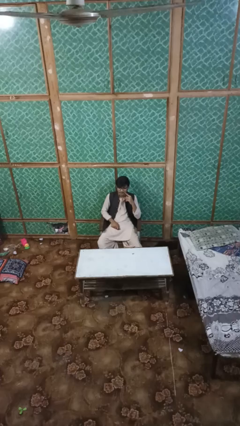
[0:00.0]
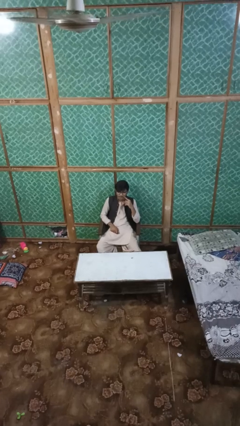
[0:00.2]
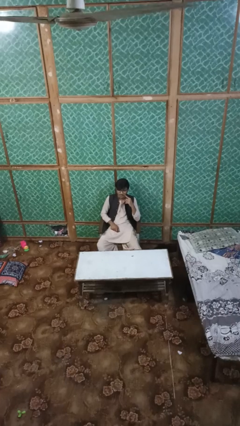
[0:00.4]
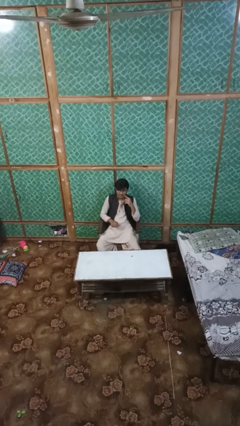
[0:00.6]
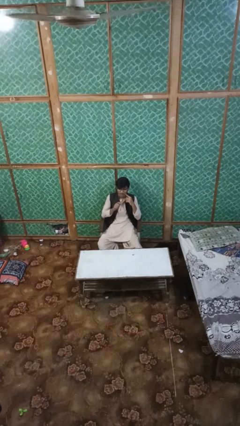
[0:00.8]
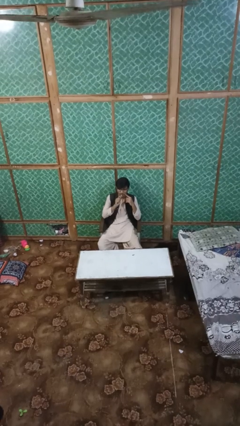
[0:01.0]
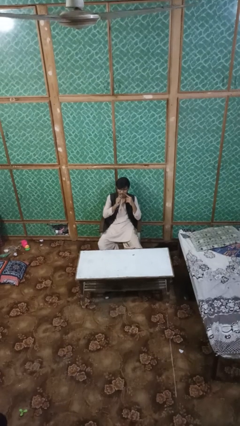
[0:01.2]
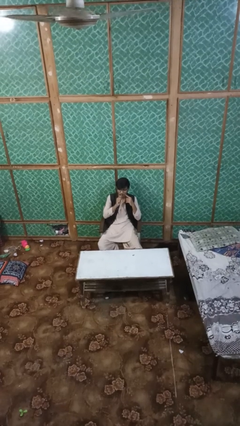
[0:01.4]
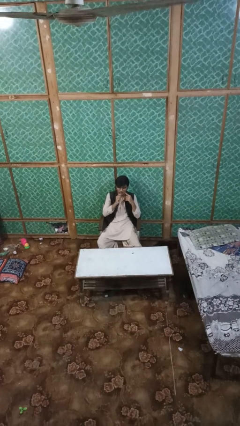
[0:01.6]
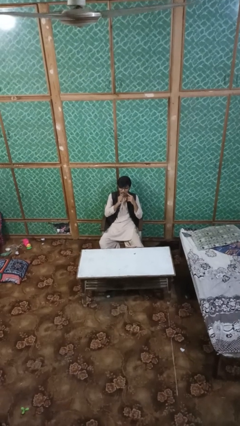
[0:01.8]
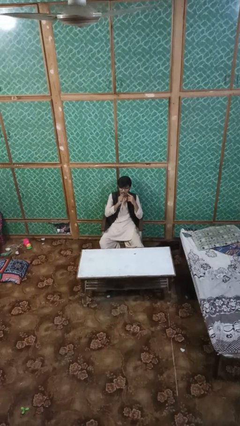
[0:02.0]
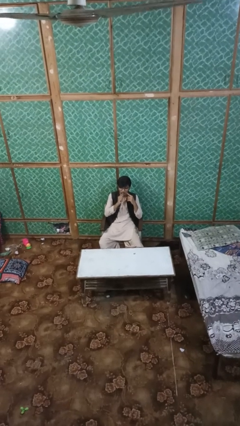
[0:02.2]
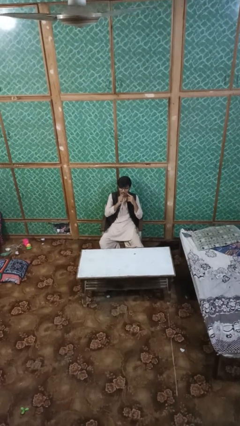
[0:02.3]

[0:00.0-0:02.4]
person vapes

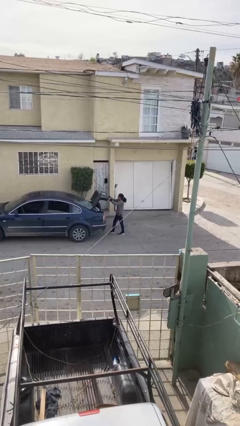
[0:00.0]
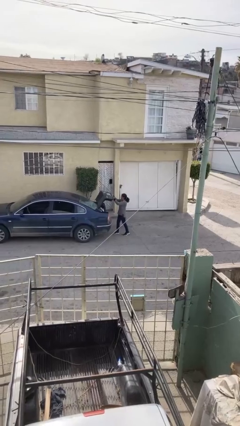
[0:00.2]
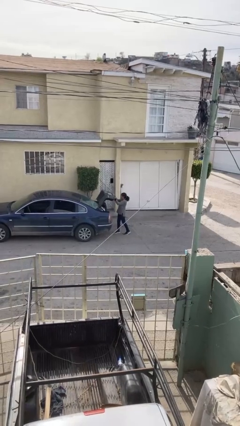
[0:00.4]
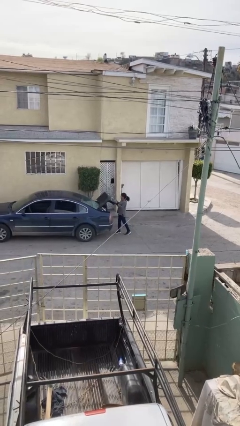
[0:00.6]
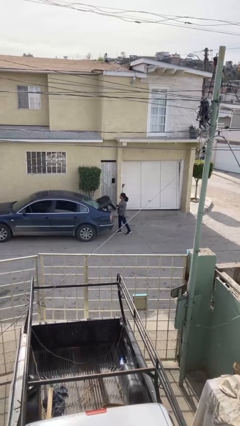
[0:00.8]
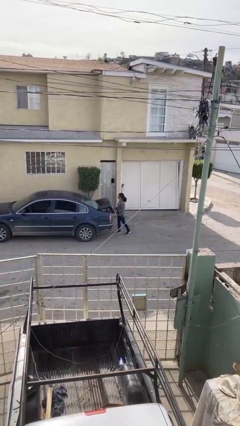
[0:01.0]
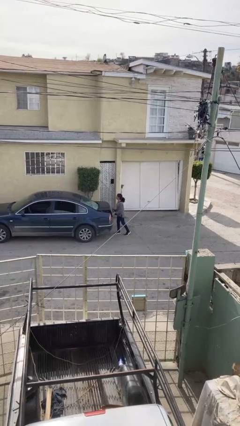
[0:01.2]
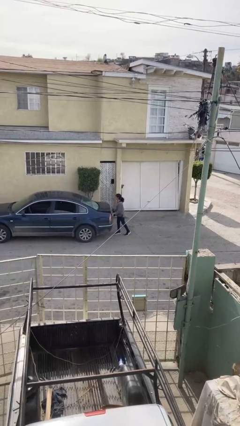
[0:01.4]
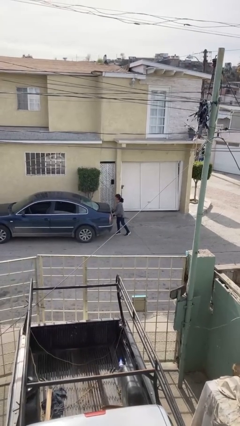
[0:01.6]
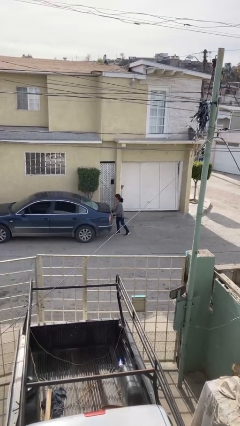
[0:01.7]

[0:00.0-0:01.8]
person closes car trunk

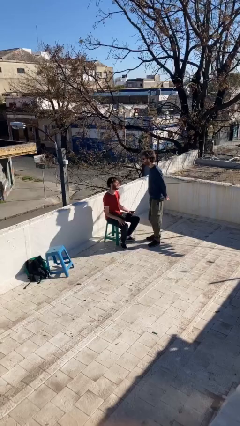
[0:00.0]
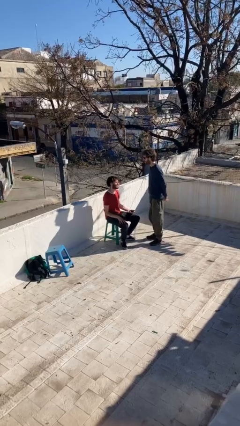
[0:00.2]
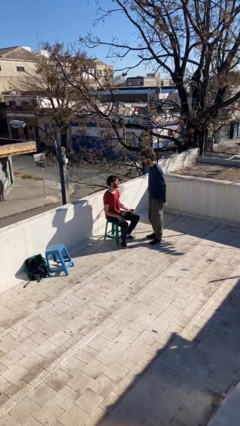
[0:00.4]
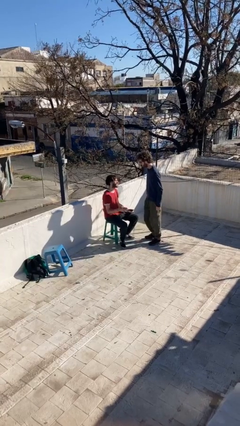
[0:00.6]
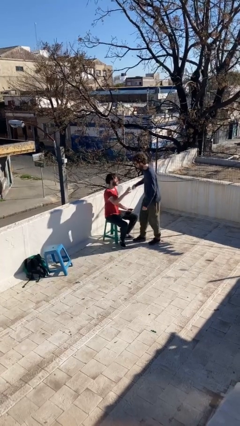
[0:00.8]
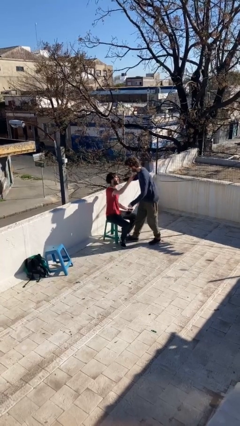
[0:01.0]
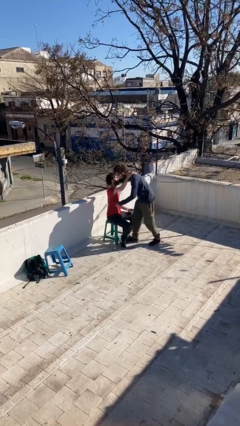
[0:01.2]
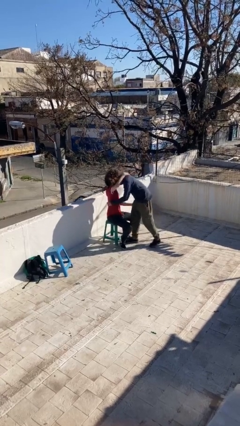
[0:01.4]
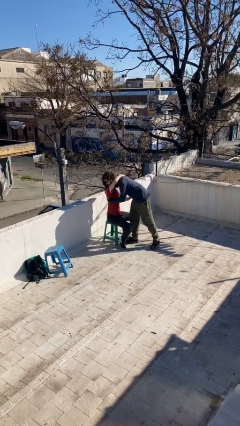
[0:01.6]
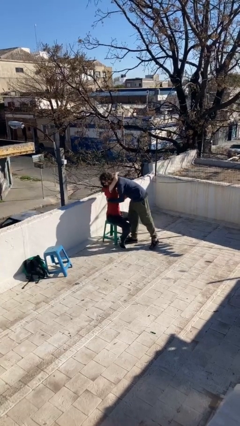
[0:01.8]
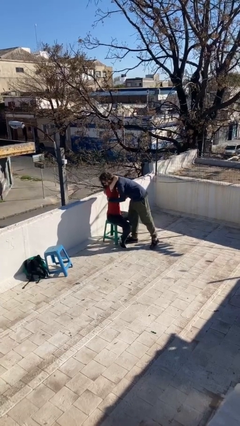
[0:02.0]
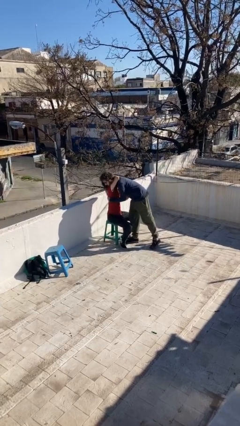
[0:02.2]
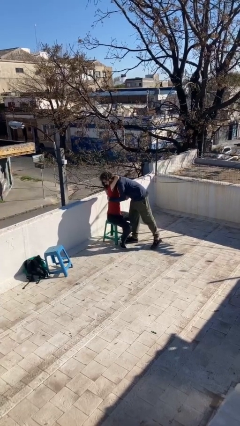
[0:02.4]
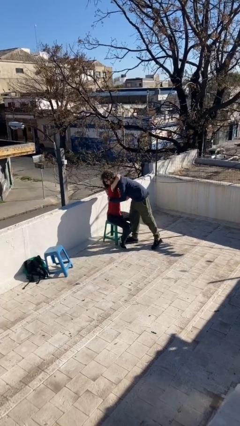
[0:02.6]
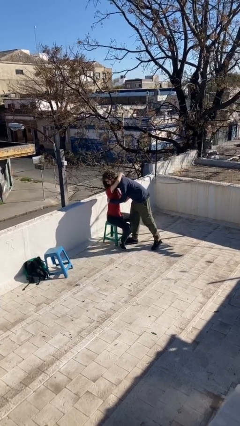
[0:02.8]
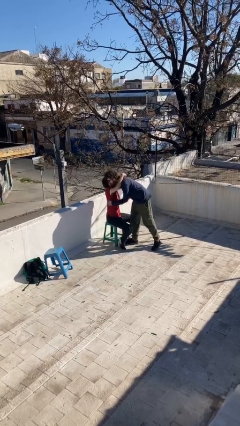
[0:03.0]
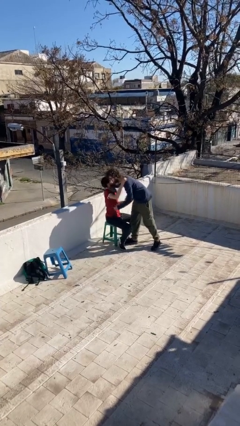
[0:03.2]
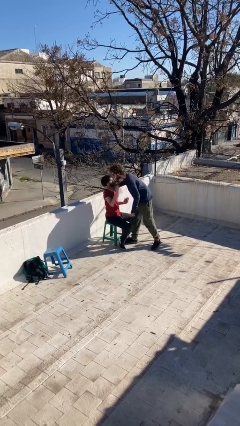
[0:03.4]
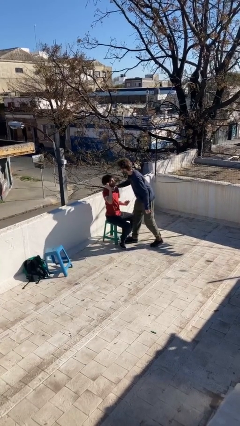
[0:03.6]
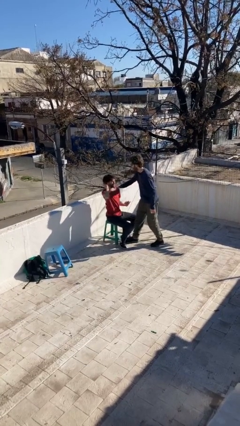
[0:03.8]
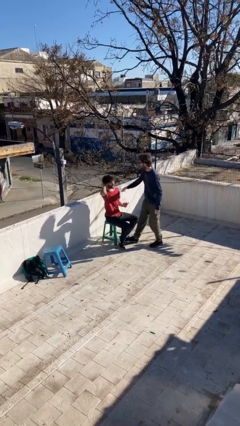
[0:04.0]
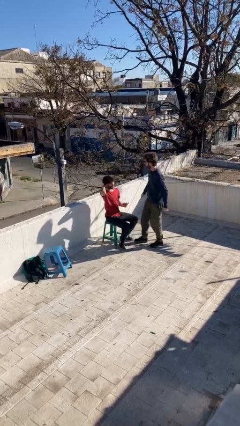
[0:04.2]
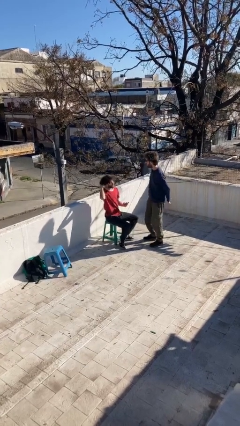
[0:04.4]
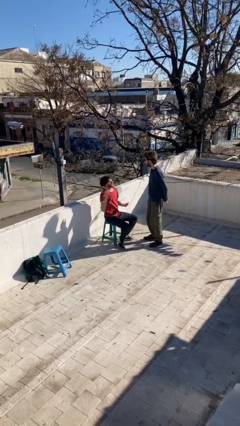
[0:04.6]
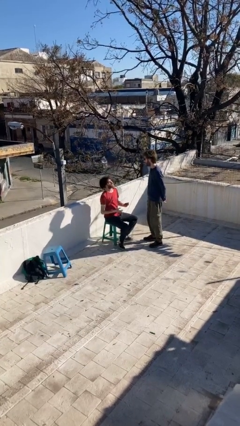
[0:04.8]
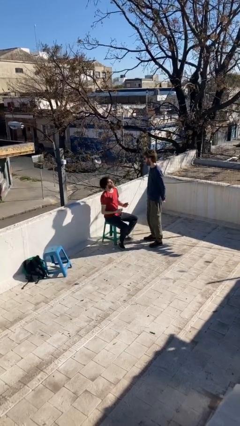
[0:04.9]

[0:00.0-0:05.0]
person embraces person

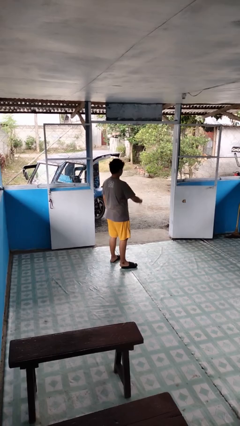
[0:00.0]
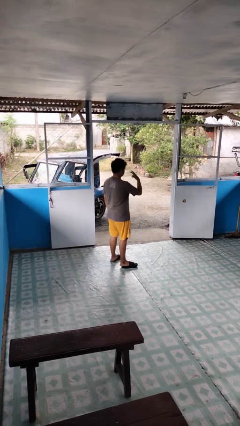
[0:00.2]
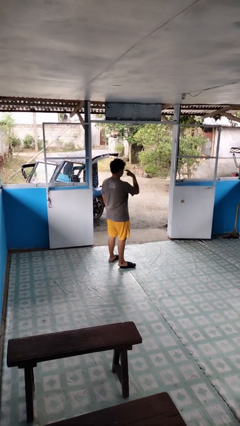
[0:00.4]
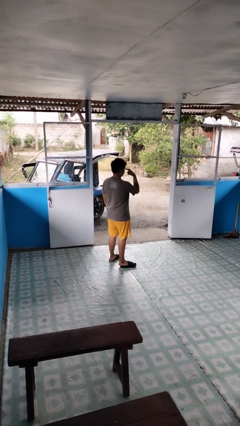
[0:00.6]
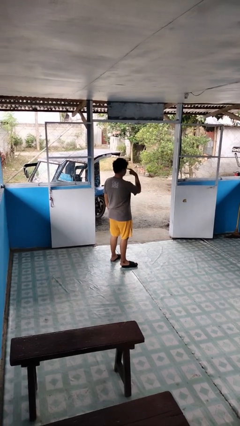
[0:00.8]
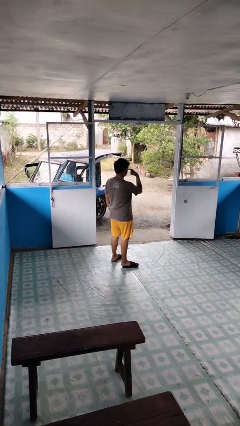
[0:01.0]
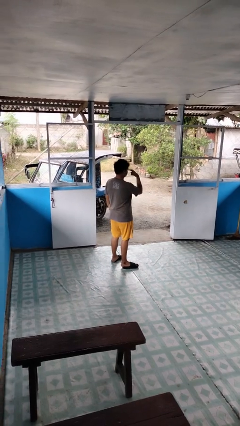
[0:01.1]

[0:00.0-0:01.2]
person gestures watch closely

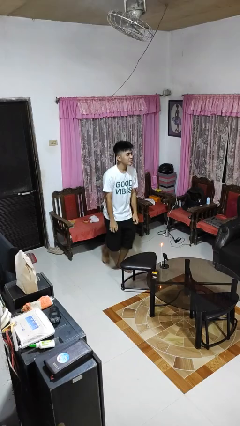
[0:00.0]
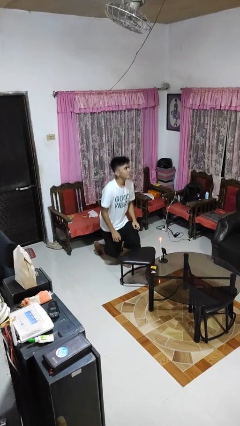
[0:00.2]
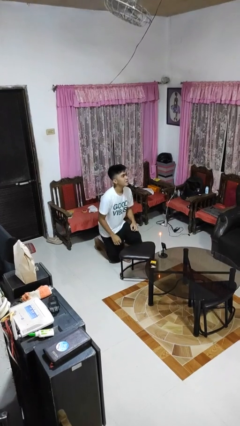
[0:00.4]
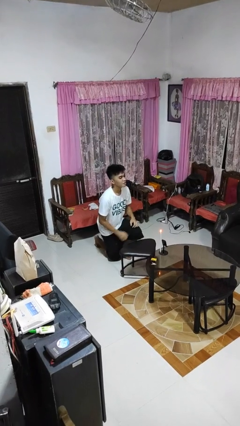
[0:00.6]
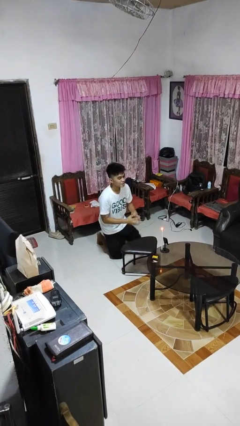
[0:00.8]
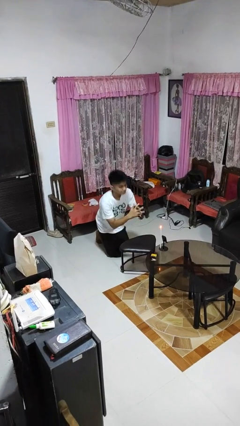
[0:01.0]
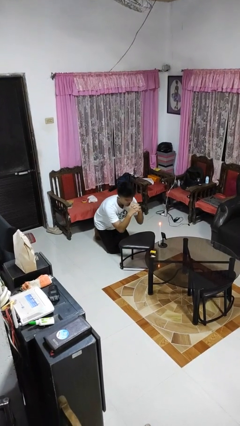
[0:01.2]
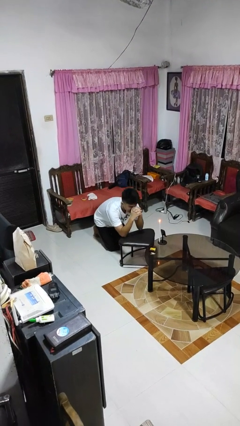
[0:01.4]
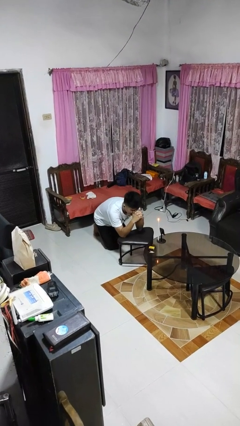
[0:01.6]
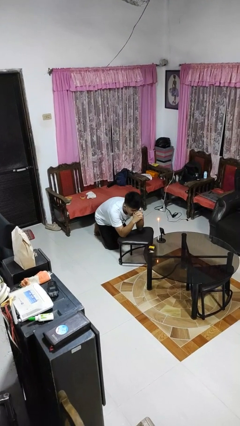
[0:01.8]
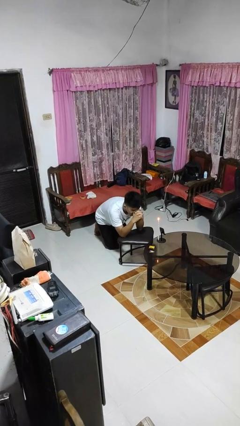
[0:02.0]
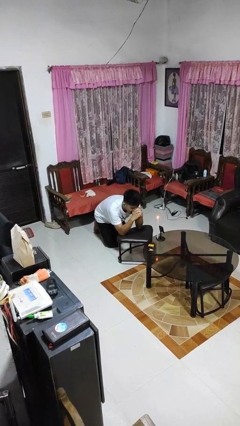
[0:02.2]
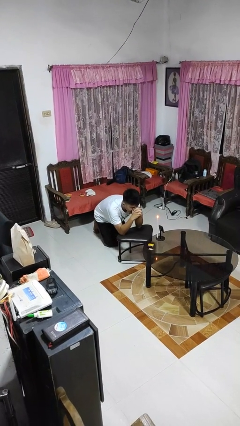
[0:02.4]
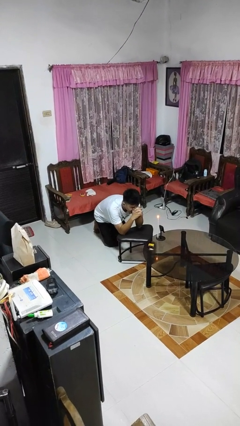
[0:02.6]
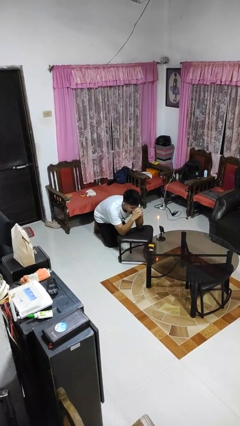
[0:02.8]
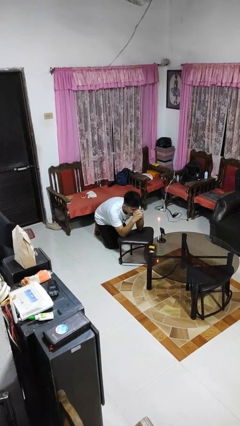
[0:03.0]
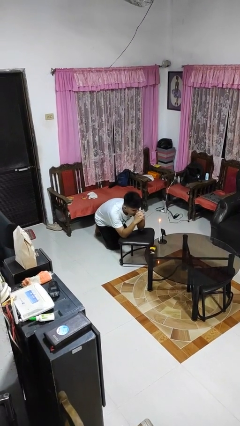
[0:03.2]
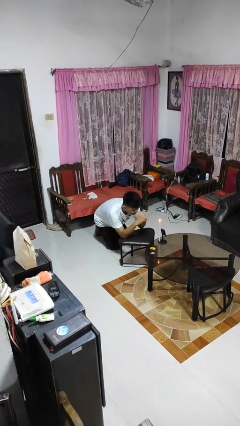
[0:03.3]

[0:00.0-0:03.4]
person prays

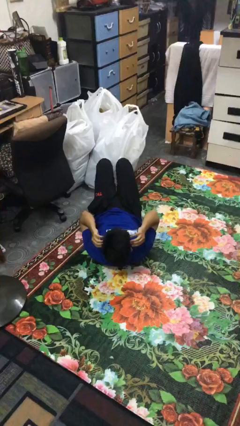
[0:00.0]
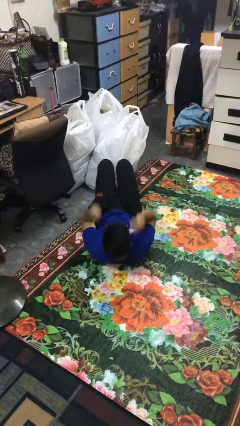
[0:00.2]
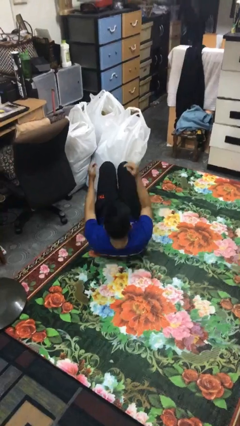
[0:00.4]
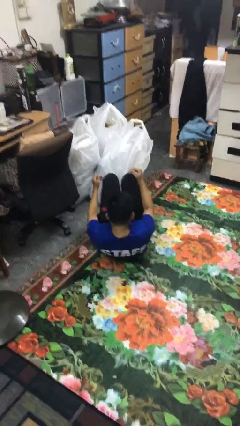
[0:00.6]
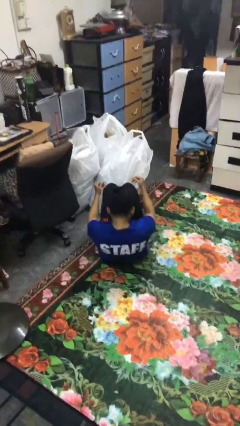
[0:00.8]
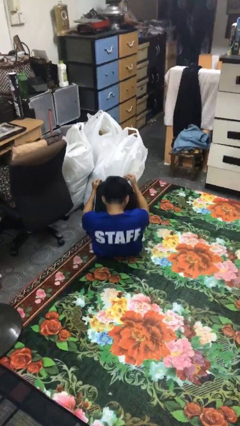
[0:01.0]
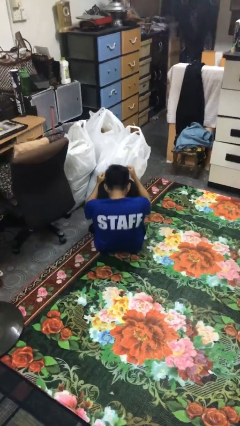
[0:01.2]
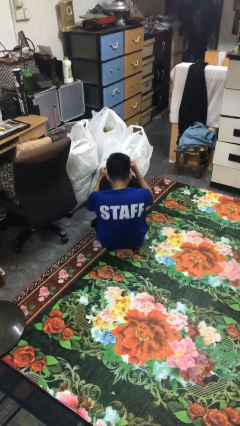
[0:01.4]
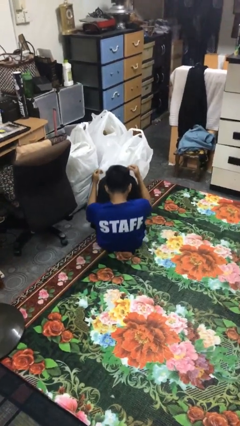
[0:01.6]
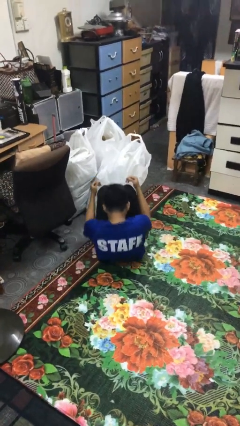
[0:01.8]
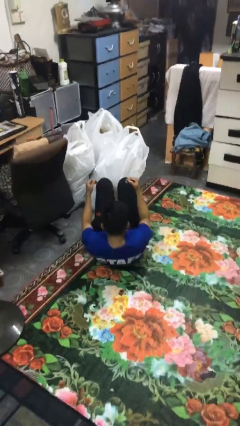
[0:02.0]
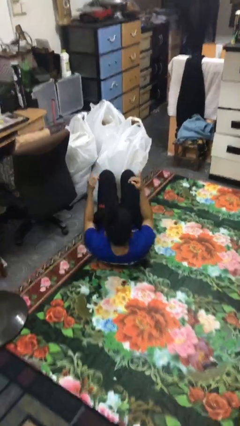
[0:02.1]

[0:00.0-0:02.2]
person exercises with situp

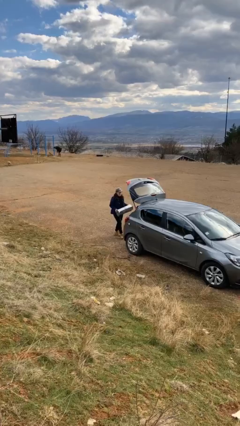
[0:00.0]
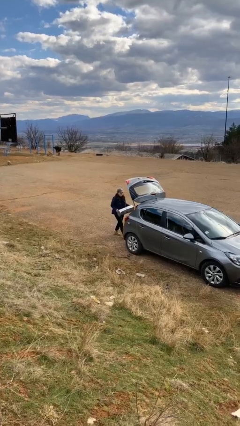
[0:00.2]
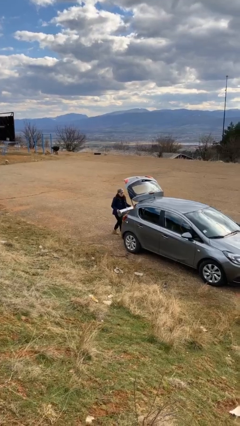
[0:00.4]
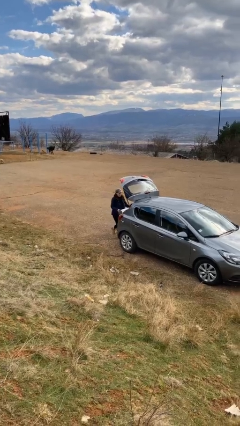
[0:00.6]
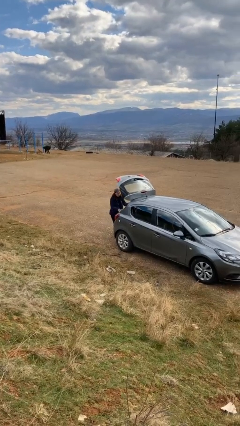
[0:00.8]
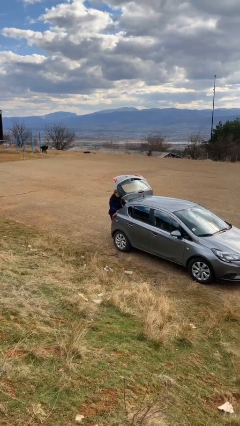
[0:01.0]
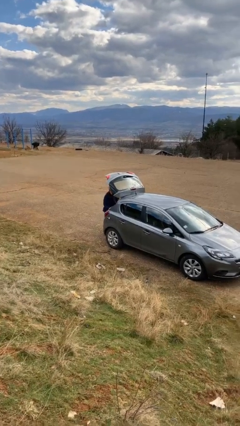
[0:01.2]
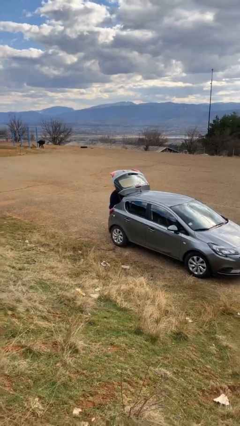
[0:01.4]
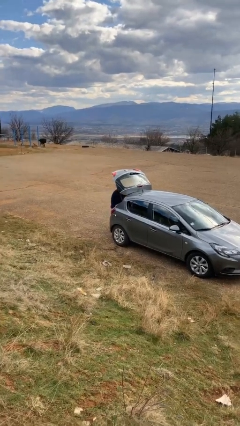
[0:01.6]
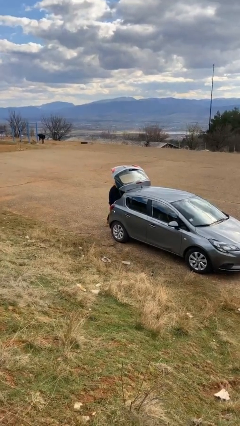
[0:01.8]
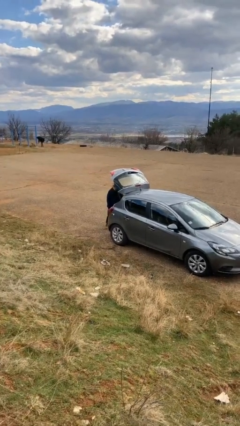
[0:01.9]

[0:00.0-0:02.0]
person loads car
